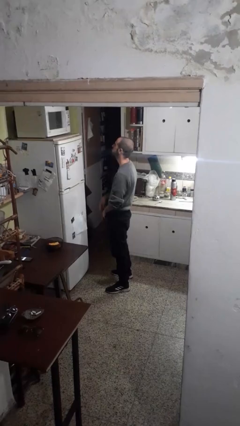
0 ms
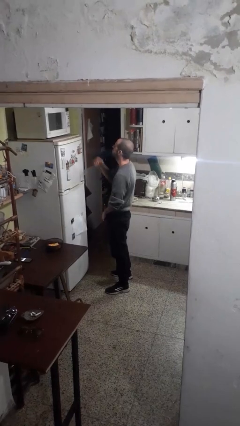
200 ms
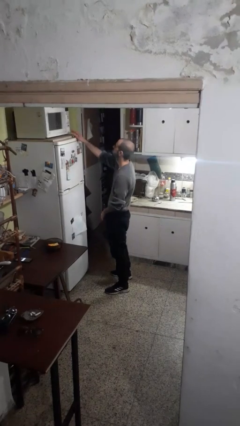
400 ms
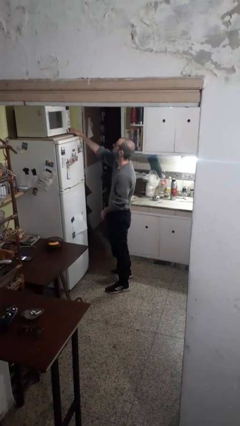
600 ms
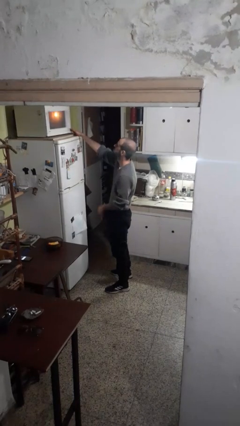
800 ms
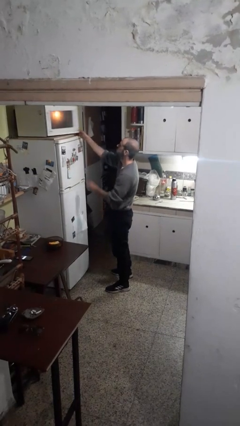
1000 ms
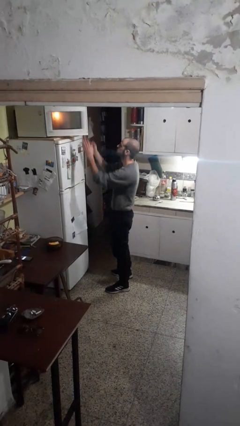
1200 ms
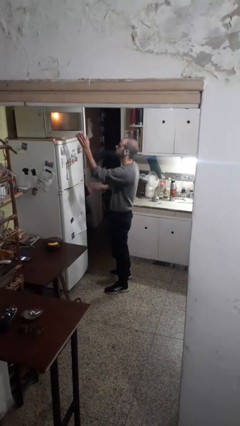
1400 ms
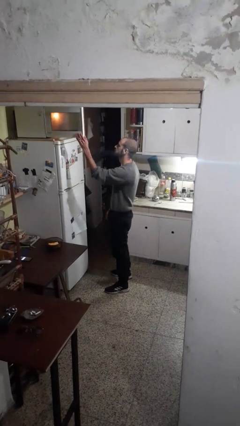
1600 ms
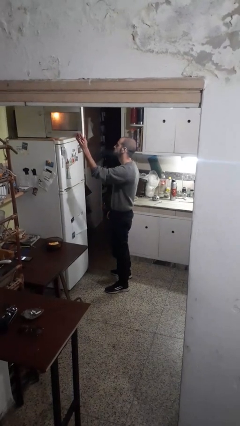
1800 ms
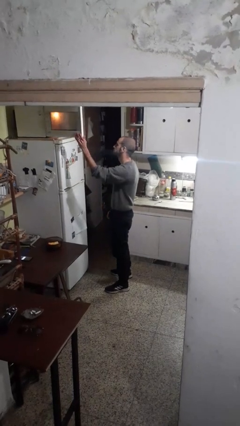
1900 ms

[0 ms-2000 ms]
person opens microwave

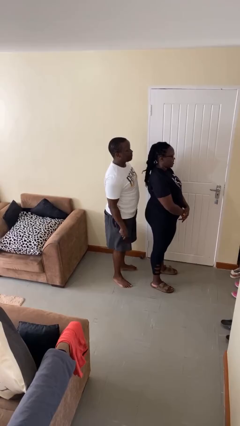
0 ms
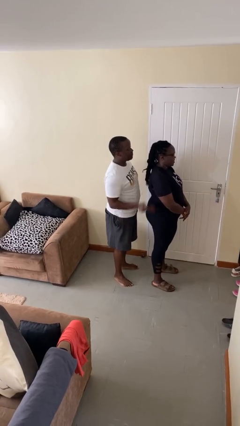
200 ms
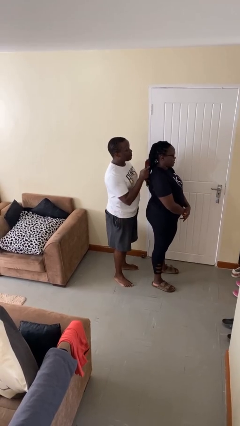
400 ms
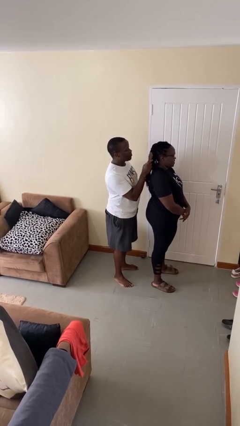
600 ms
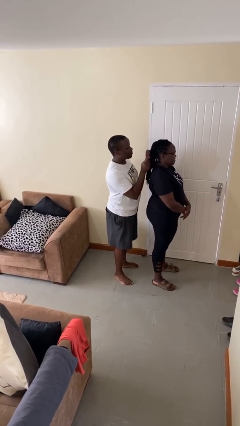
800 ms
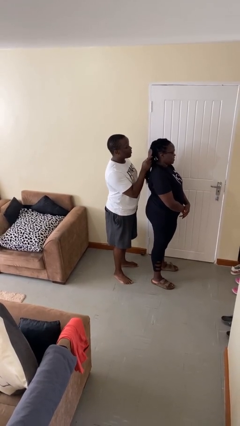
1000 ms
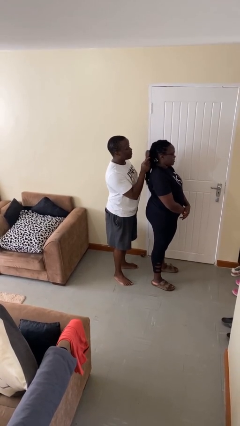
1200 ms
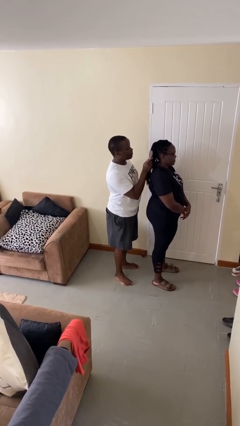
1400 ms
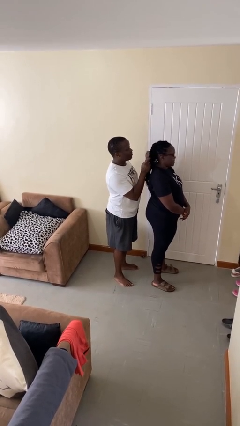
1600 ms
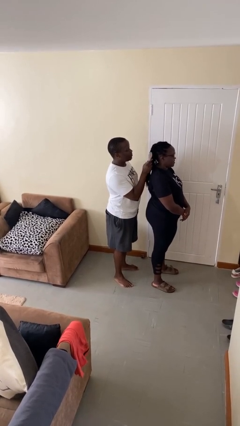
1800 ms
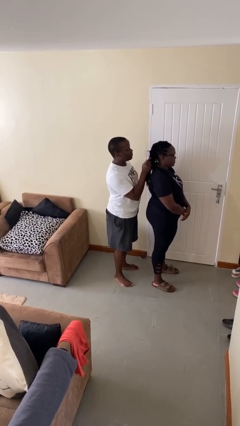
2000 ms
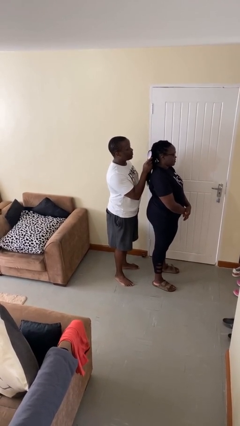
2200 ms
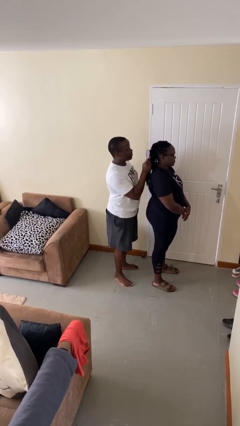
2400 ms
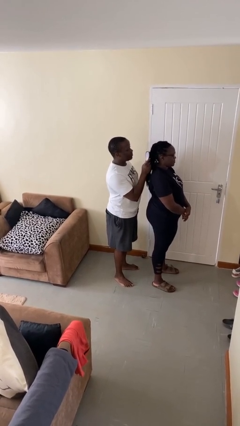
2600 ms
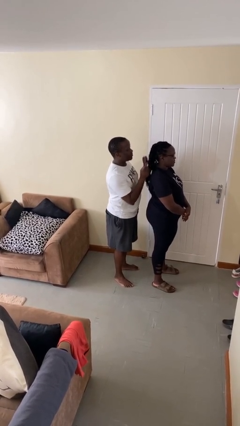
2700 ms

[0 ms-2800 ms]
person brushes hair of person

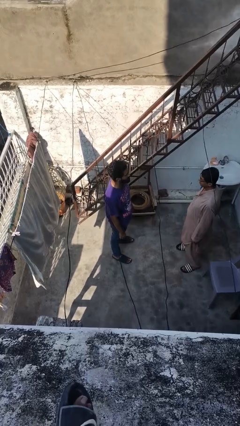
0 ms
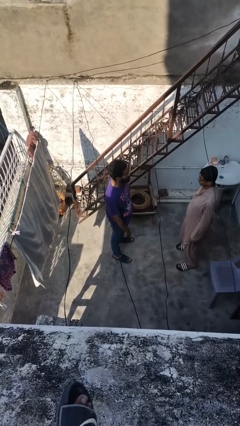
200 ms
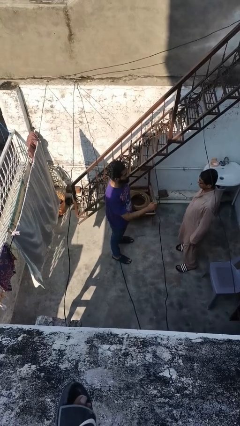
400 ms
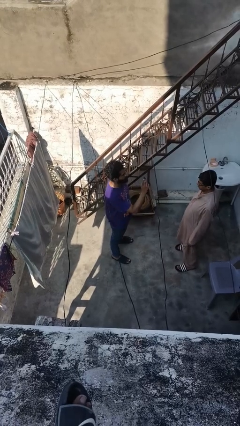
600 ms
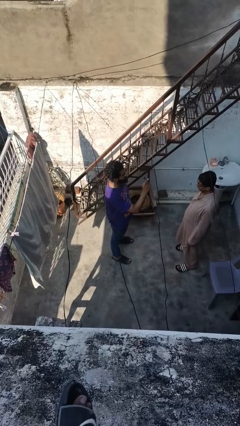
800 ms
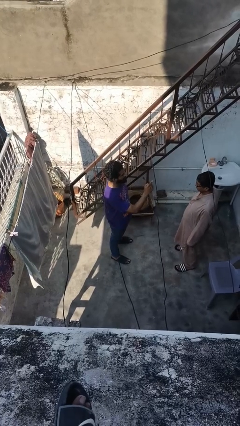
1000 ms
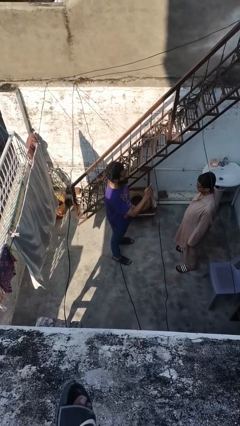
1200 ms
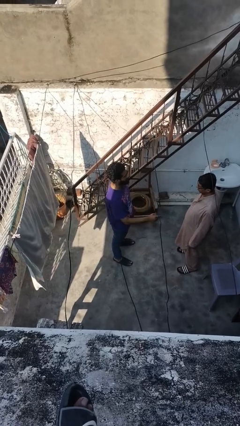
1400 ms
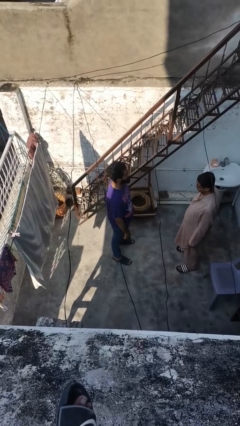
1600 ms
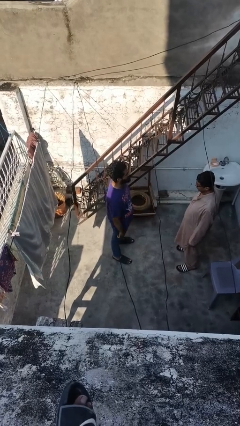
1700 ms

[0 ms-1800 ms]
person points at person

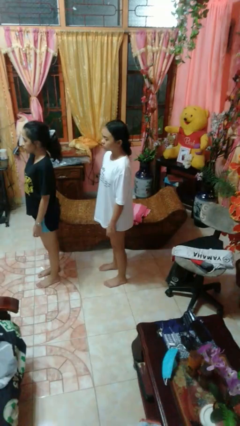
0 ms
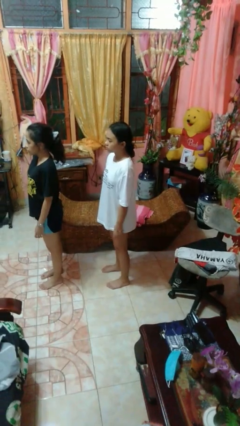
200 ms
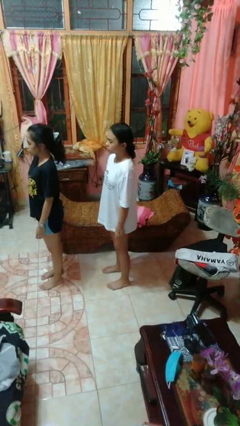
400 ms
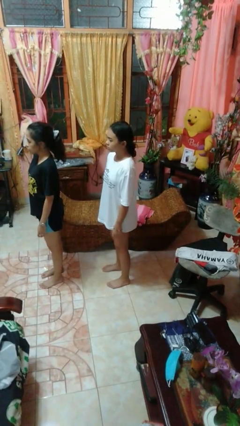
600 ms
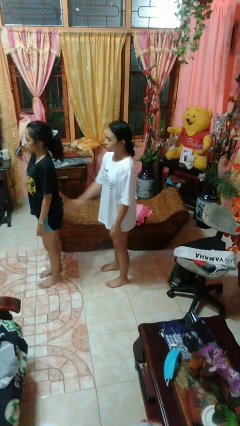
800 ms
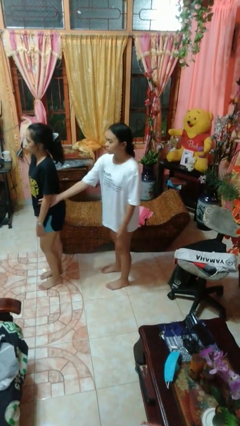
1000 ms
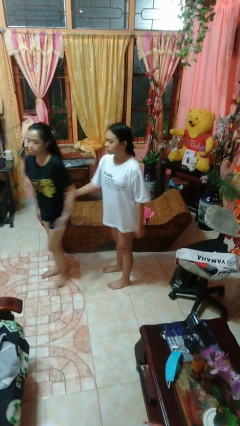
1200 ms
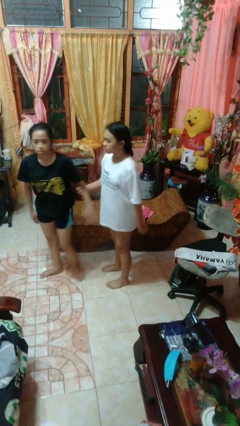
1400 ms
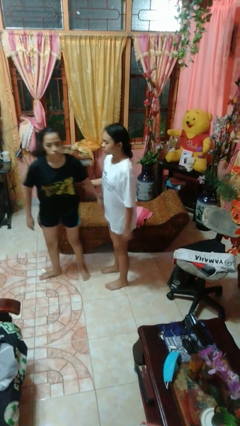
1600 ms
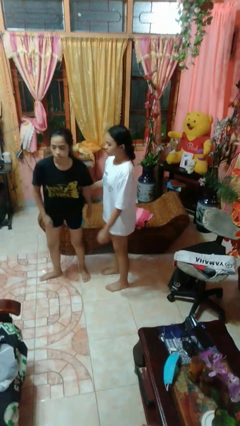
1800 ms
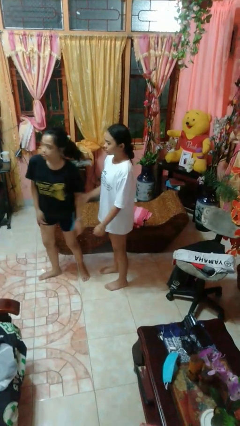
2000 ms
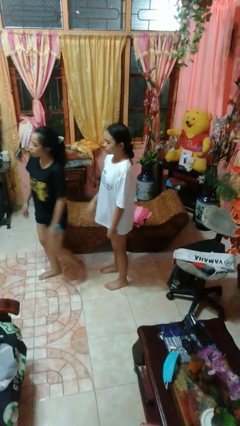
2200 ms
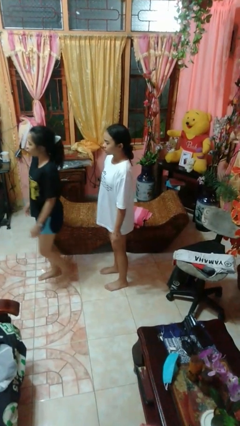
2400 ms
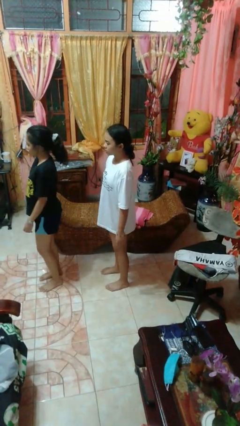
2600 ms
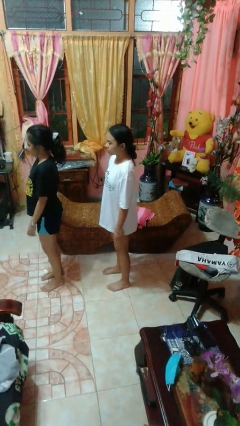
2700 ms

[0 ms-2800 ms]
person grabs person by forearm

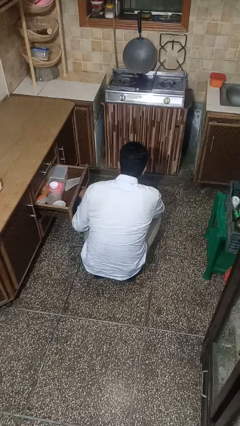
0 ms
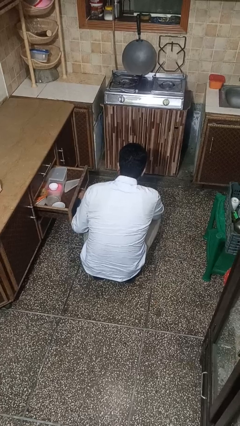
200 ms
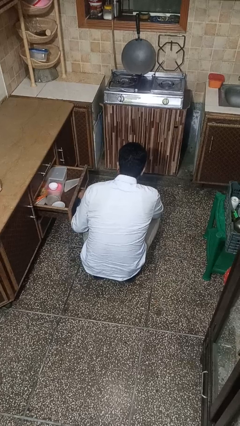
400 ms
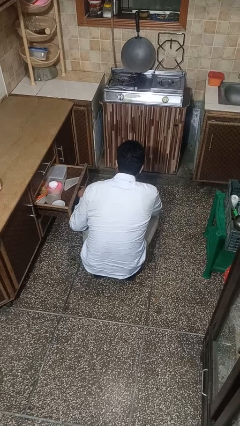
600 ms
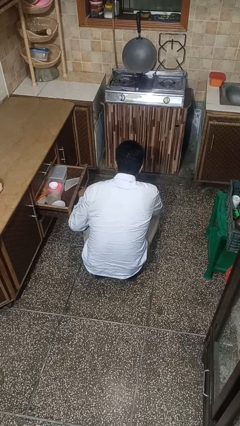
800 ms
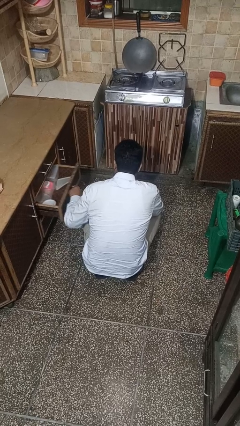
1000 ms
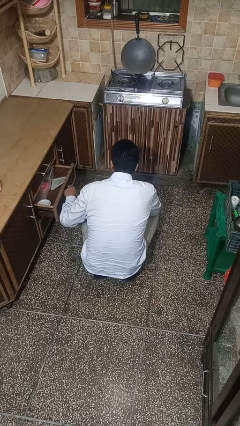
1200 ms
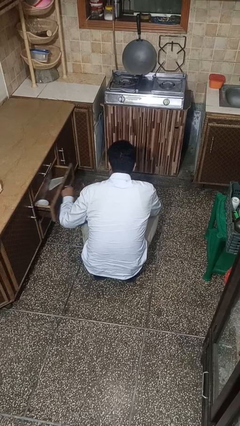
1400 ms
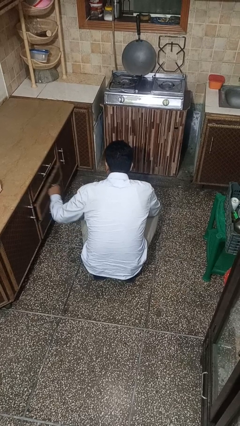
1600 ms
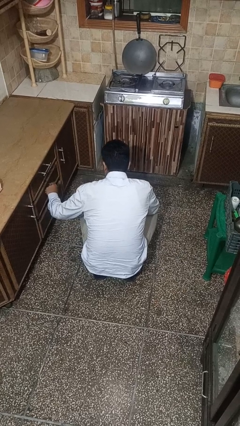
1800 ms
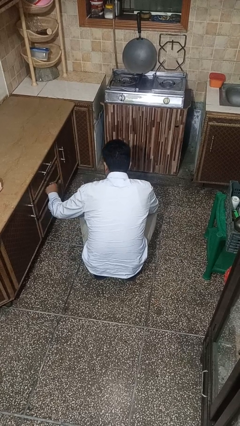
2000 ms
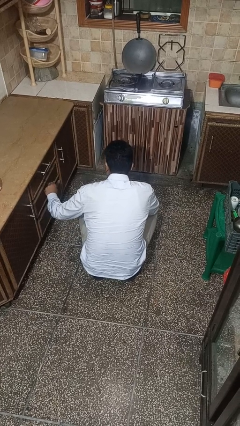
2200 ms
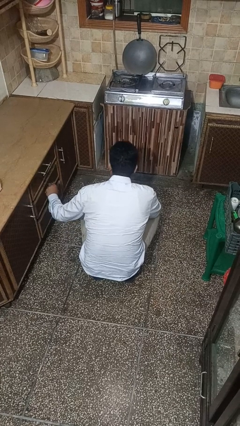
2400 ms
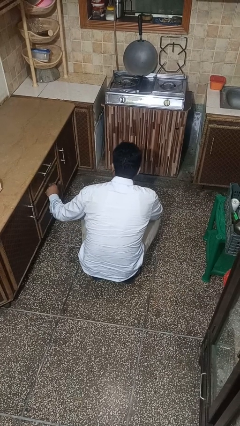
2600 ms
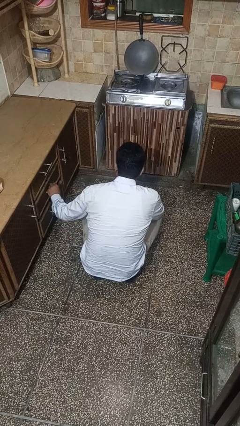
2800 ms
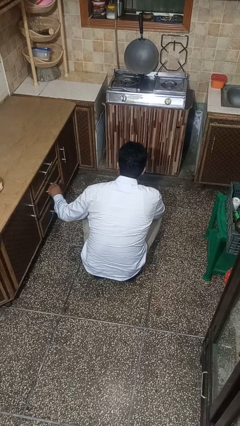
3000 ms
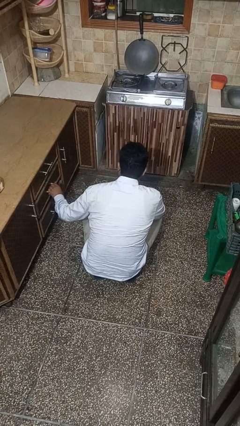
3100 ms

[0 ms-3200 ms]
person closes kitchen drawer

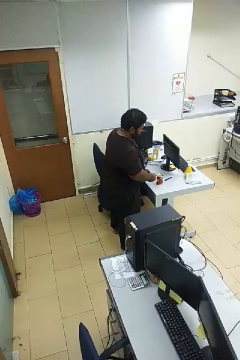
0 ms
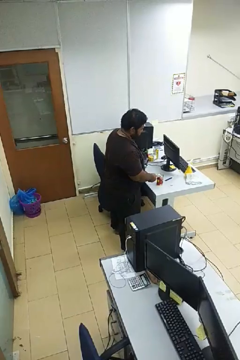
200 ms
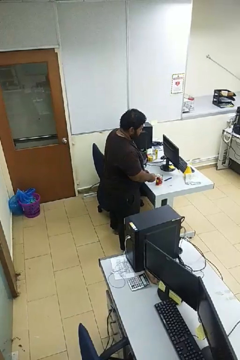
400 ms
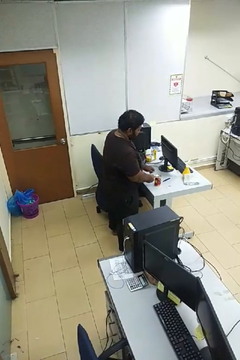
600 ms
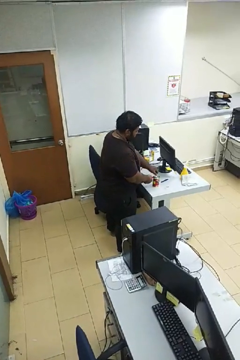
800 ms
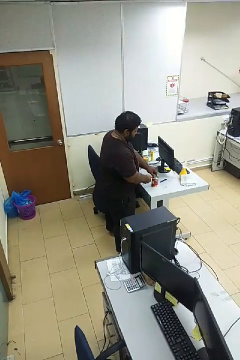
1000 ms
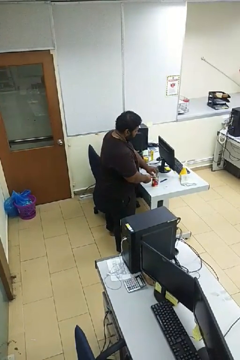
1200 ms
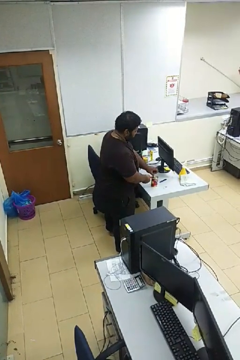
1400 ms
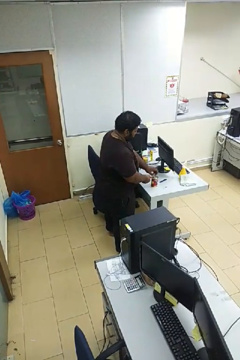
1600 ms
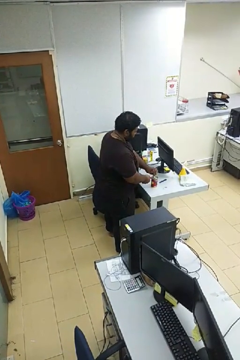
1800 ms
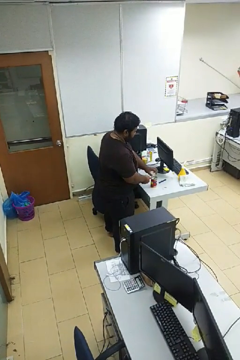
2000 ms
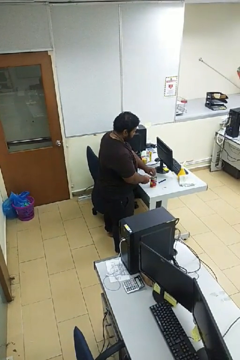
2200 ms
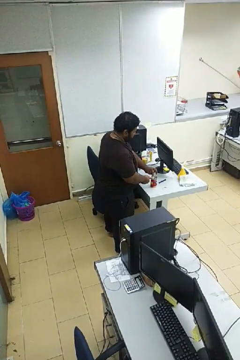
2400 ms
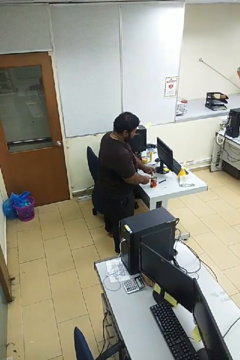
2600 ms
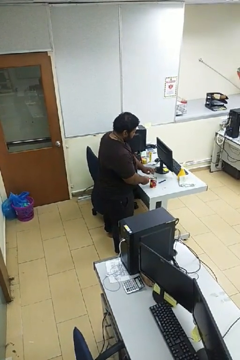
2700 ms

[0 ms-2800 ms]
person opens can with can opener

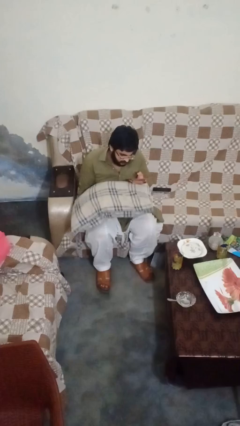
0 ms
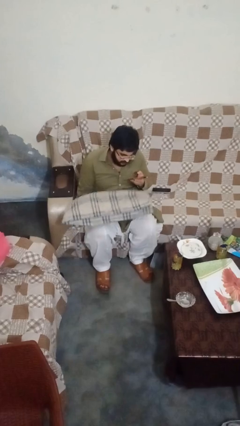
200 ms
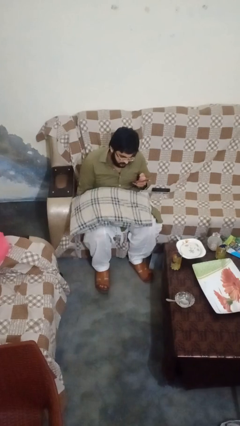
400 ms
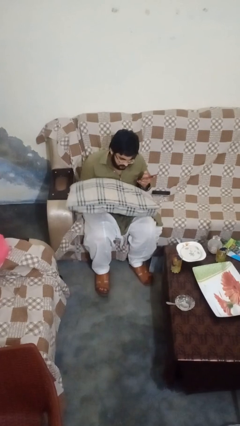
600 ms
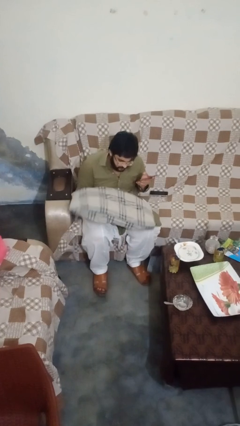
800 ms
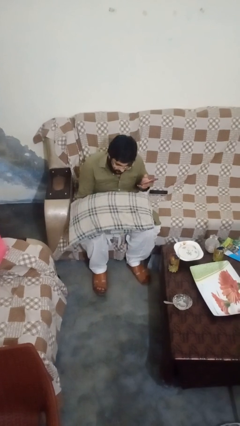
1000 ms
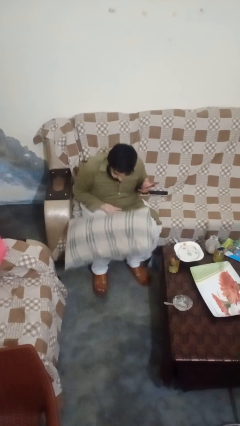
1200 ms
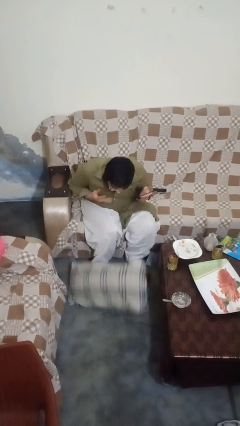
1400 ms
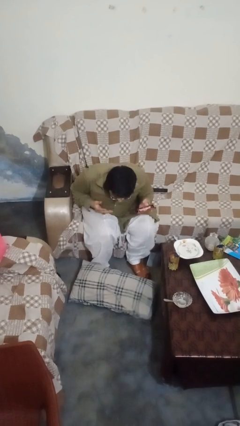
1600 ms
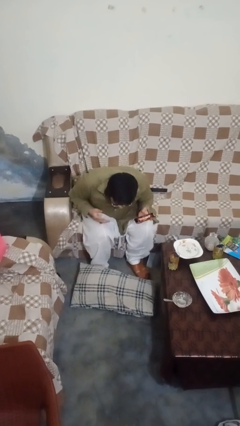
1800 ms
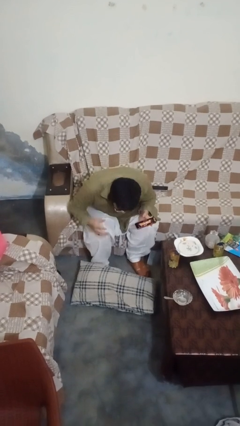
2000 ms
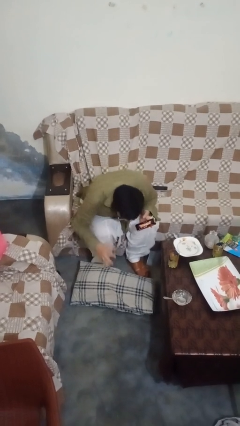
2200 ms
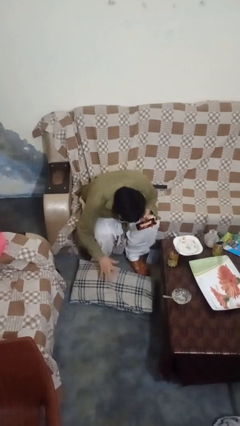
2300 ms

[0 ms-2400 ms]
person drops object

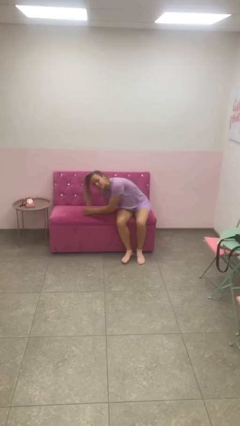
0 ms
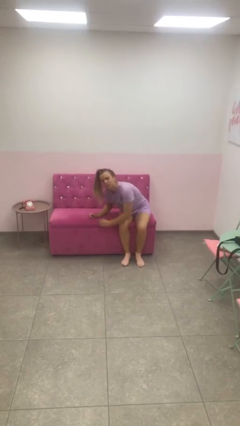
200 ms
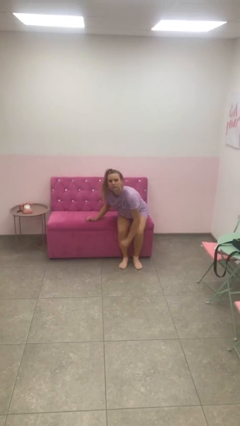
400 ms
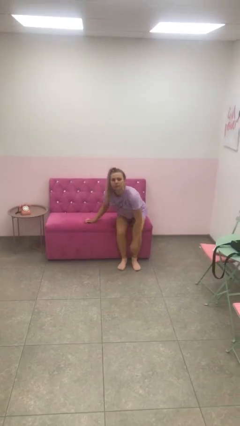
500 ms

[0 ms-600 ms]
person stands up
